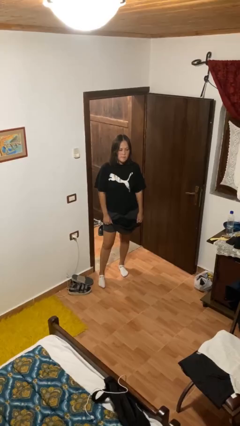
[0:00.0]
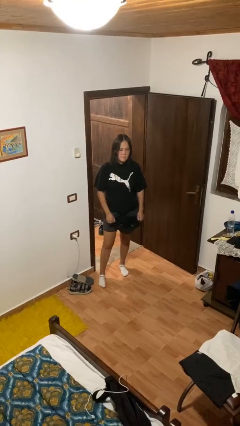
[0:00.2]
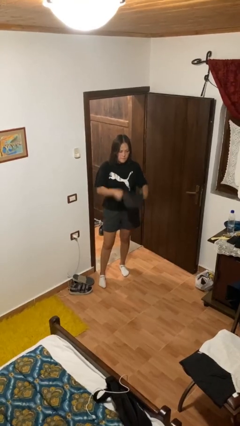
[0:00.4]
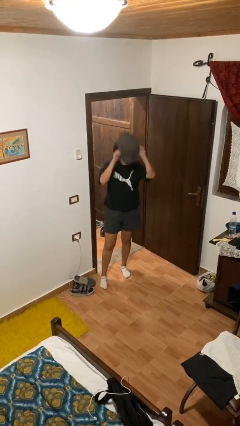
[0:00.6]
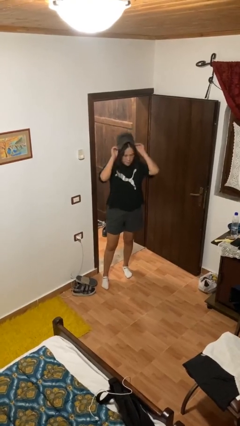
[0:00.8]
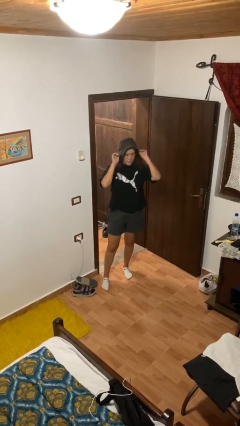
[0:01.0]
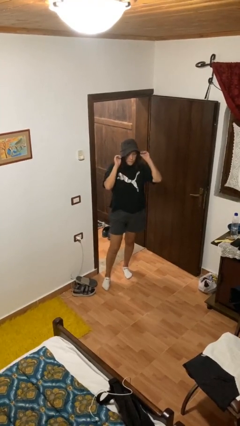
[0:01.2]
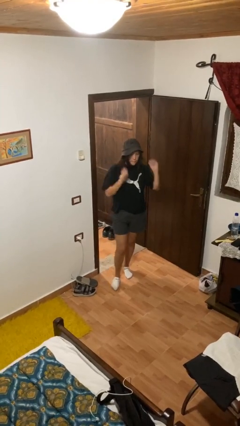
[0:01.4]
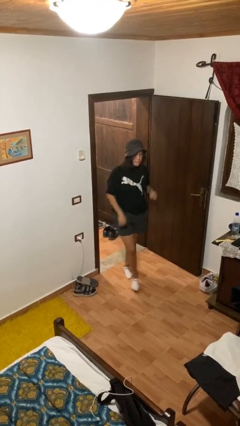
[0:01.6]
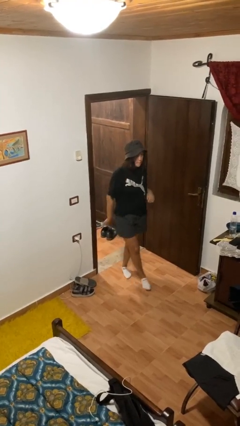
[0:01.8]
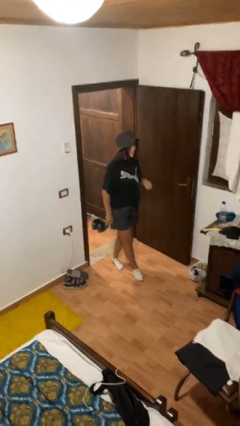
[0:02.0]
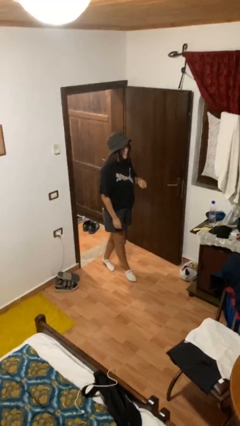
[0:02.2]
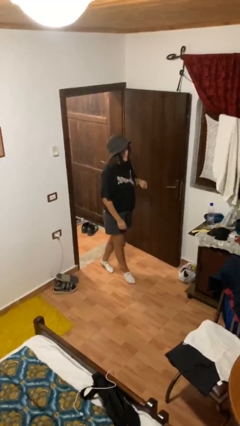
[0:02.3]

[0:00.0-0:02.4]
person puts on hat

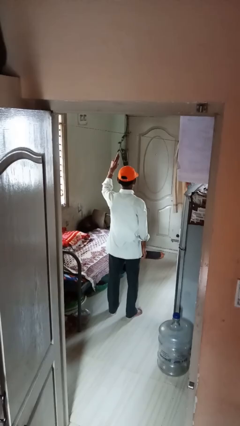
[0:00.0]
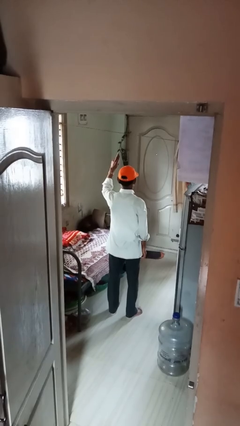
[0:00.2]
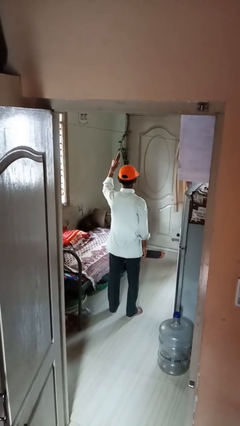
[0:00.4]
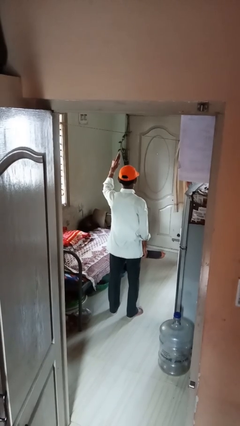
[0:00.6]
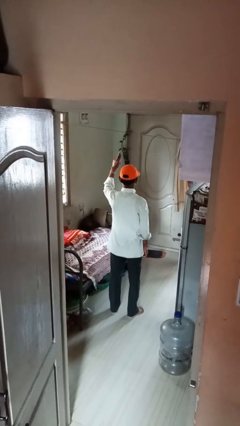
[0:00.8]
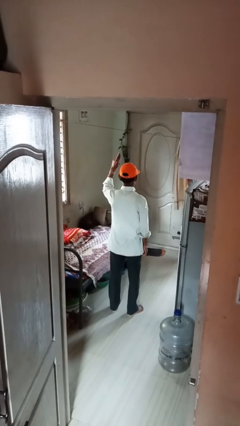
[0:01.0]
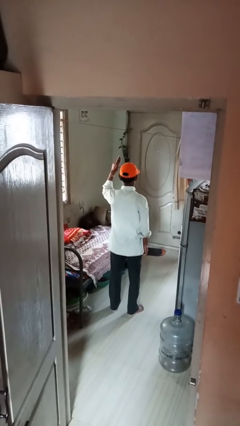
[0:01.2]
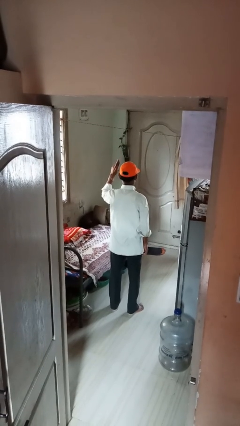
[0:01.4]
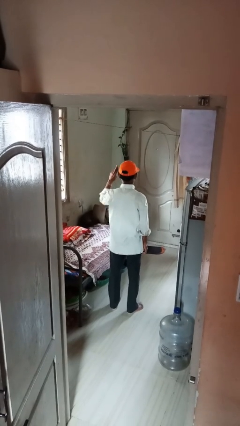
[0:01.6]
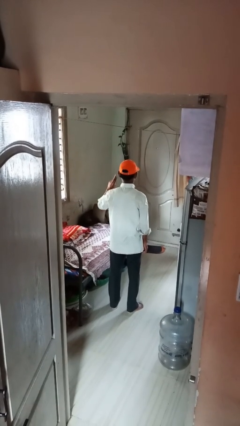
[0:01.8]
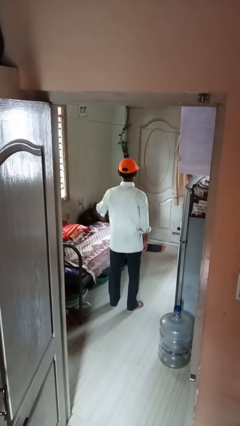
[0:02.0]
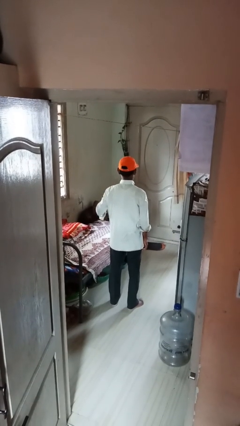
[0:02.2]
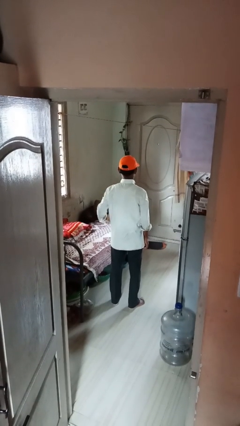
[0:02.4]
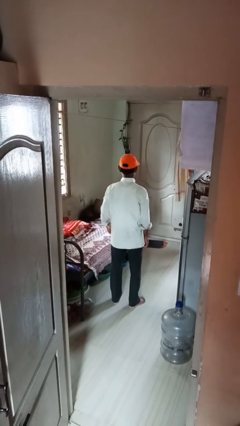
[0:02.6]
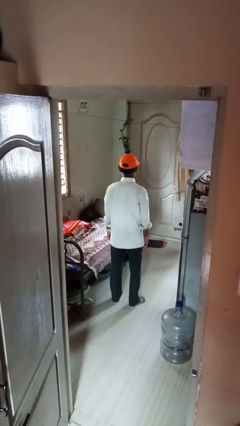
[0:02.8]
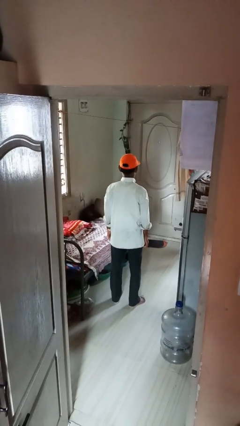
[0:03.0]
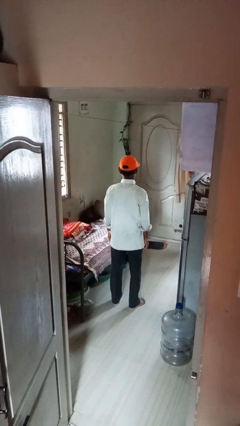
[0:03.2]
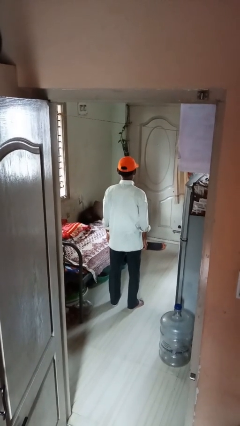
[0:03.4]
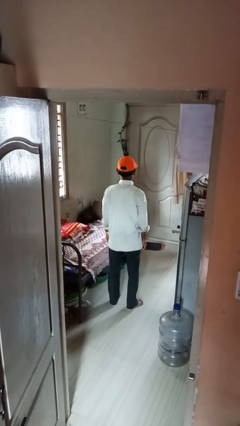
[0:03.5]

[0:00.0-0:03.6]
person gestures swipe down

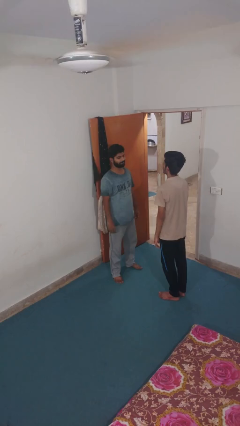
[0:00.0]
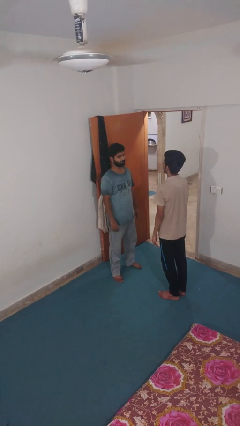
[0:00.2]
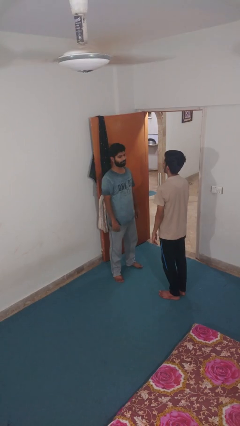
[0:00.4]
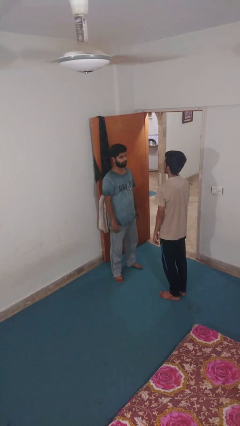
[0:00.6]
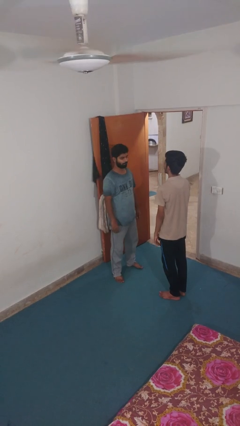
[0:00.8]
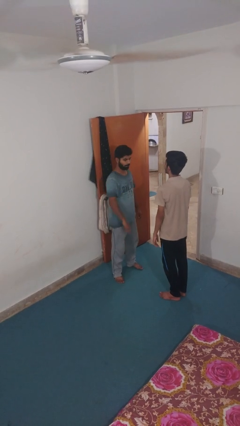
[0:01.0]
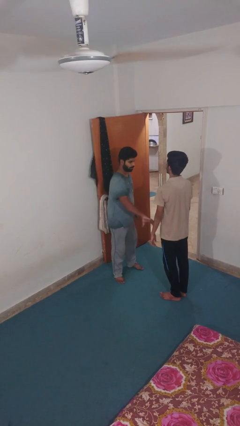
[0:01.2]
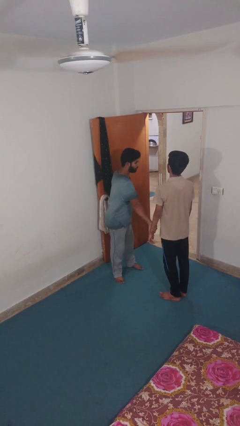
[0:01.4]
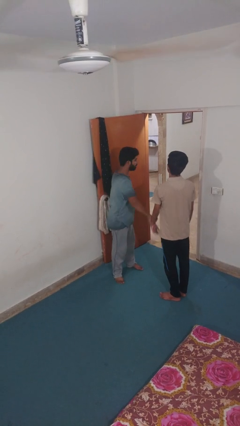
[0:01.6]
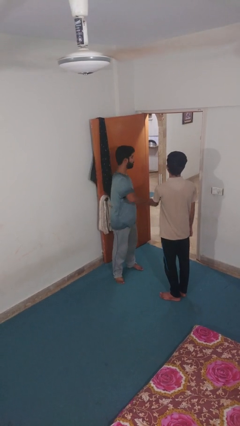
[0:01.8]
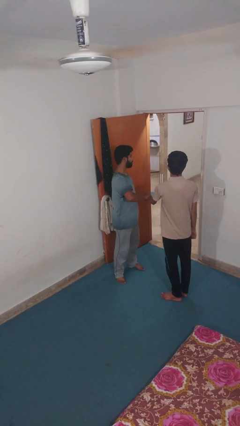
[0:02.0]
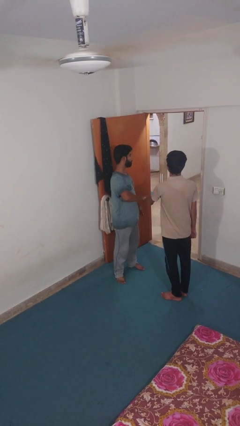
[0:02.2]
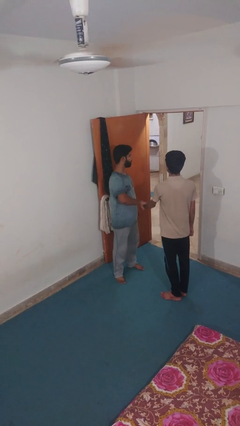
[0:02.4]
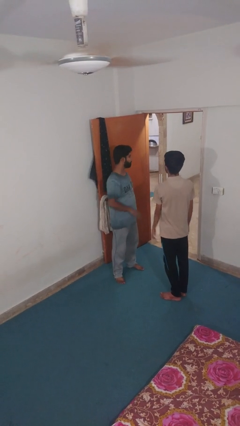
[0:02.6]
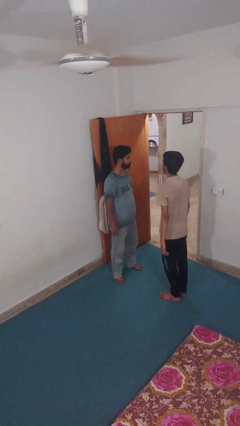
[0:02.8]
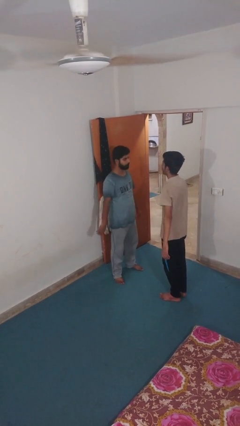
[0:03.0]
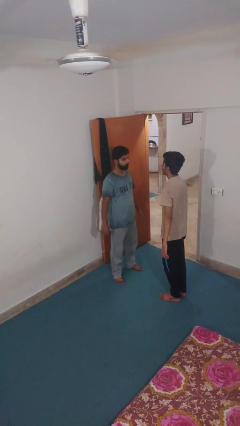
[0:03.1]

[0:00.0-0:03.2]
person grabs person by forearm

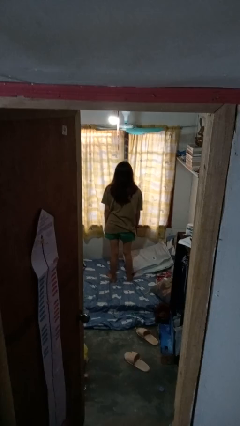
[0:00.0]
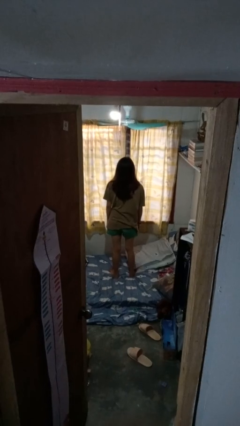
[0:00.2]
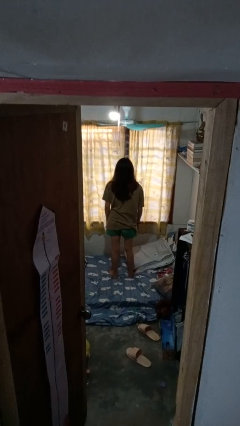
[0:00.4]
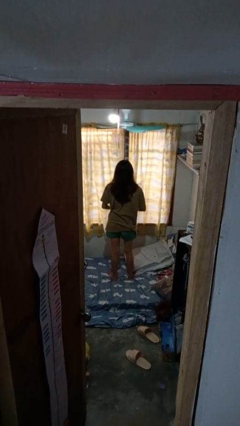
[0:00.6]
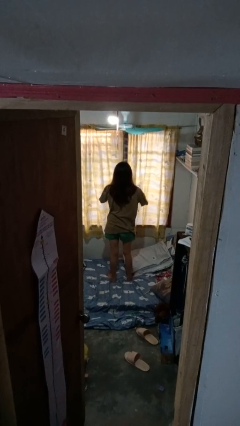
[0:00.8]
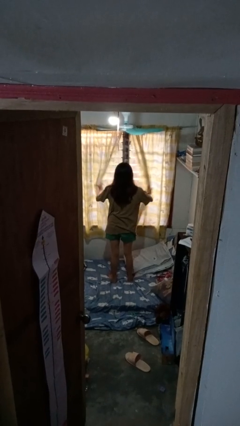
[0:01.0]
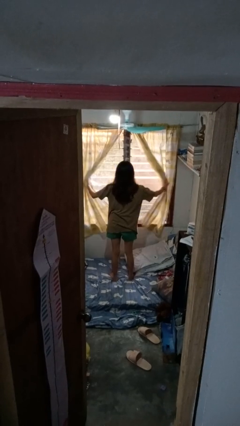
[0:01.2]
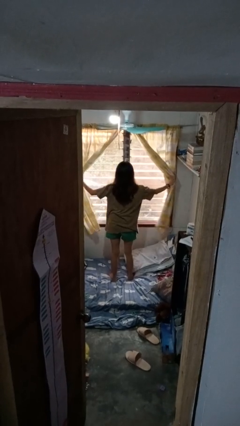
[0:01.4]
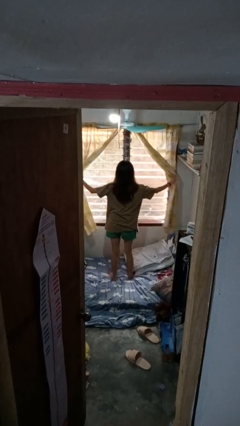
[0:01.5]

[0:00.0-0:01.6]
person opens curtains

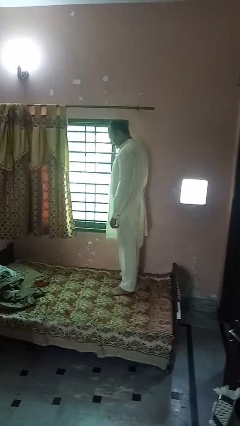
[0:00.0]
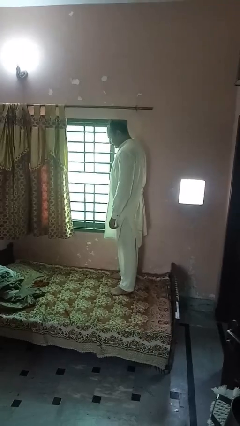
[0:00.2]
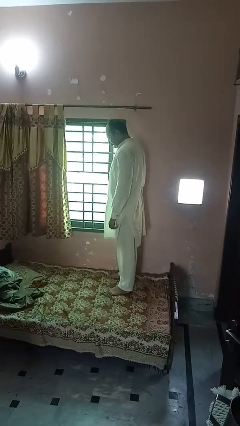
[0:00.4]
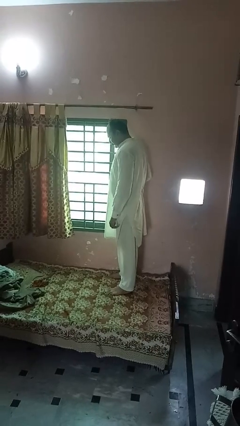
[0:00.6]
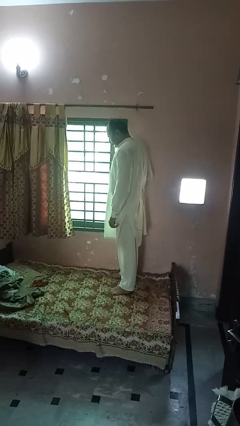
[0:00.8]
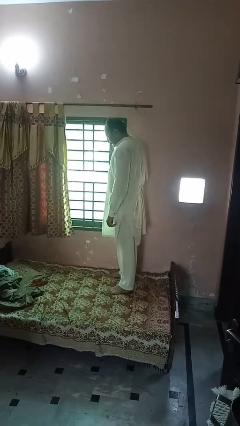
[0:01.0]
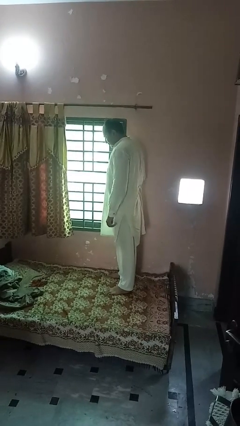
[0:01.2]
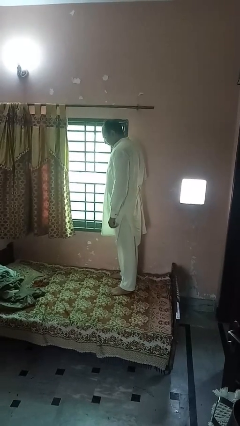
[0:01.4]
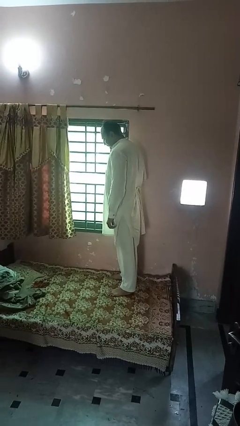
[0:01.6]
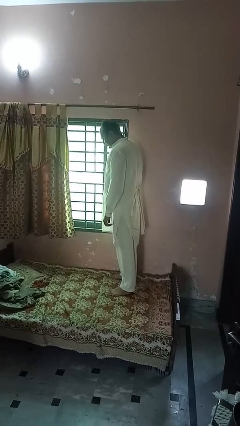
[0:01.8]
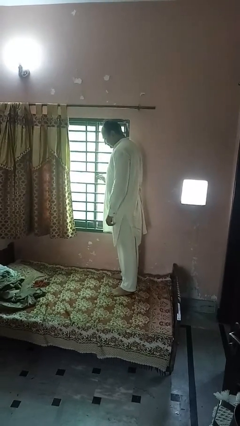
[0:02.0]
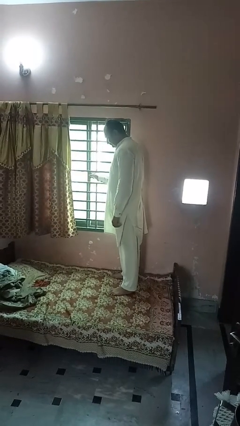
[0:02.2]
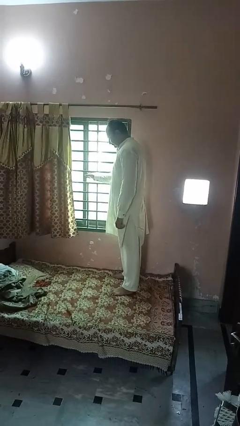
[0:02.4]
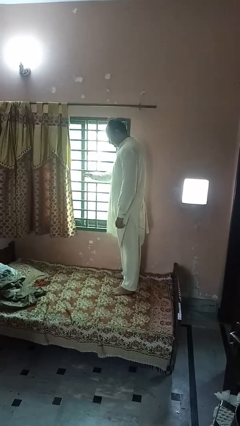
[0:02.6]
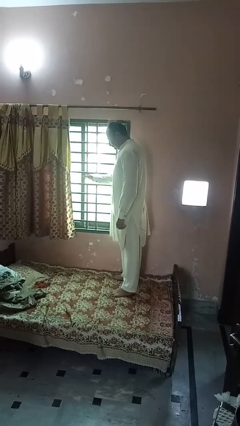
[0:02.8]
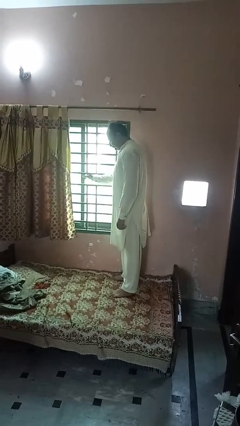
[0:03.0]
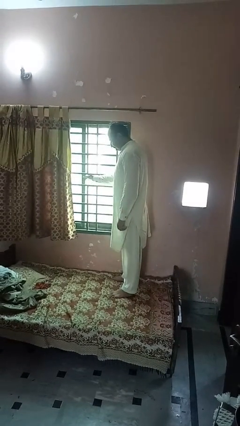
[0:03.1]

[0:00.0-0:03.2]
person opens home window

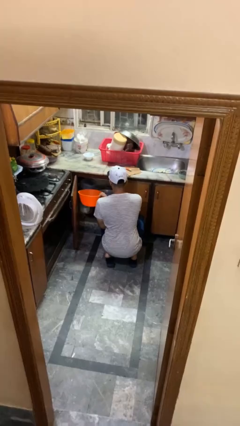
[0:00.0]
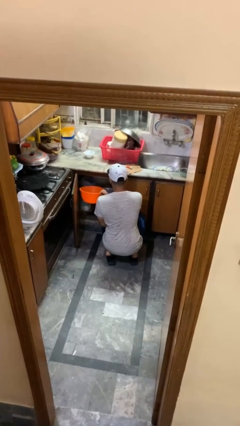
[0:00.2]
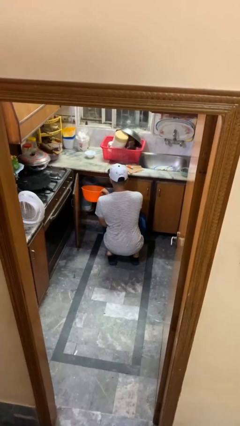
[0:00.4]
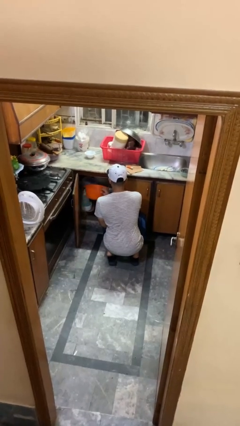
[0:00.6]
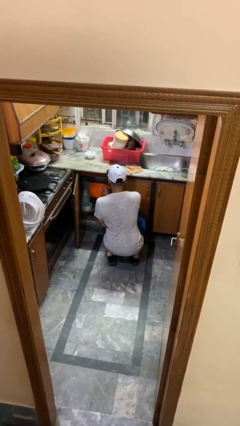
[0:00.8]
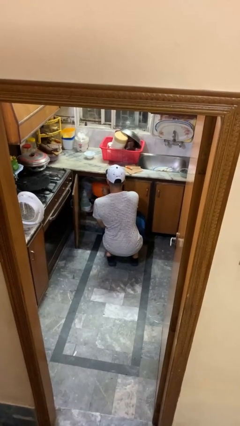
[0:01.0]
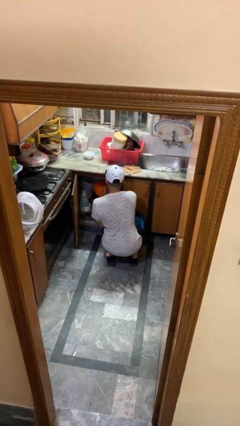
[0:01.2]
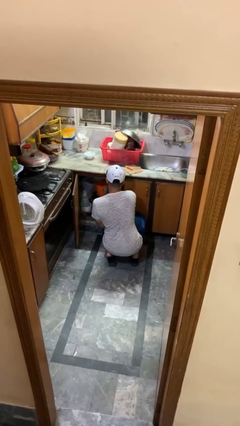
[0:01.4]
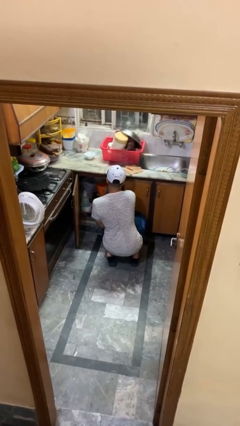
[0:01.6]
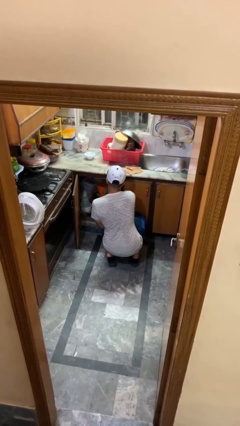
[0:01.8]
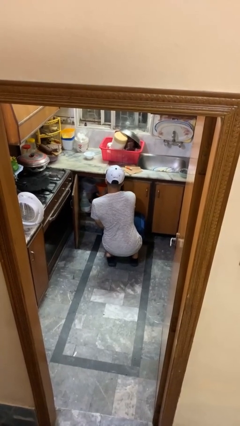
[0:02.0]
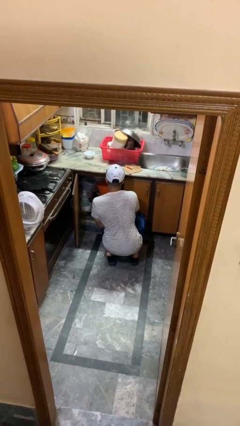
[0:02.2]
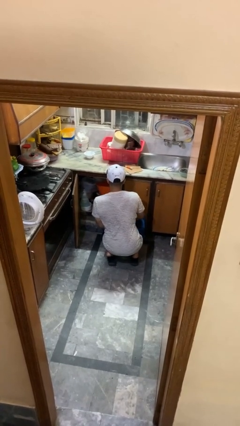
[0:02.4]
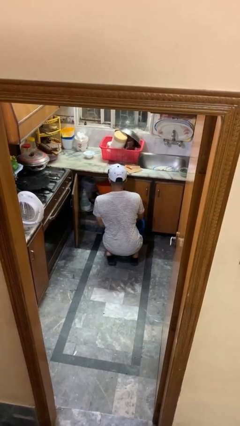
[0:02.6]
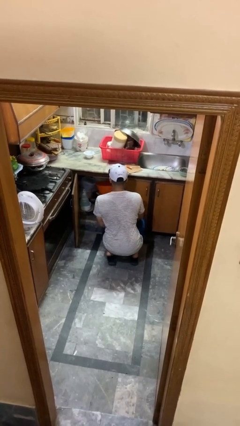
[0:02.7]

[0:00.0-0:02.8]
person puts object into kitchen drawer

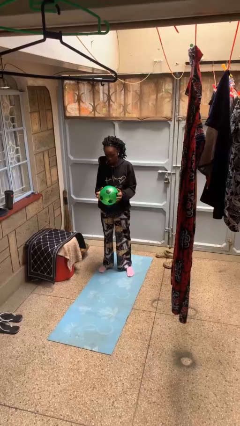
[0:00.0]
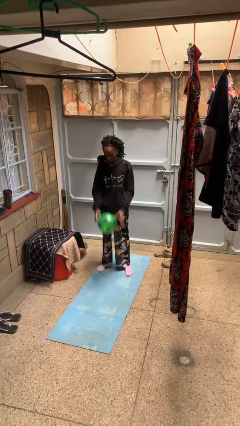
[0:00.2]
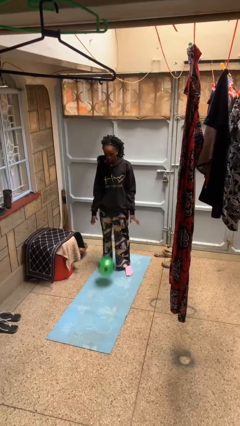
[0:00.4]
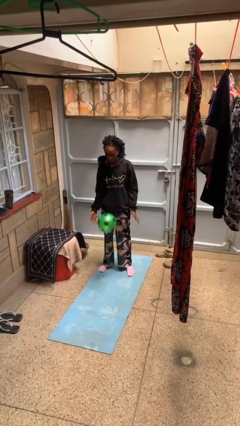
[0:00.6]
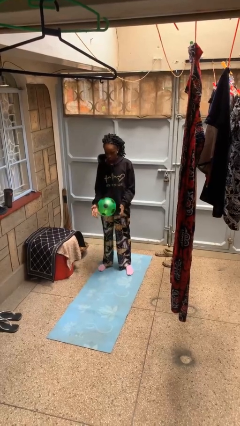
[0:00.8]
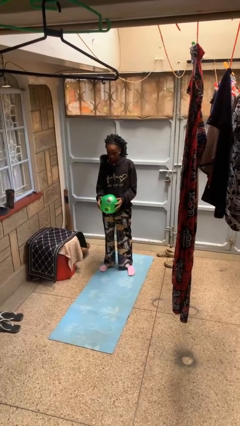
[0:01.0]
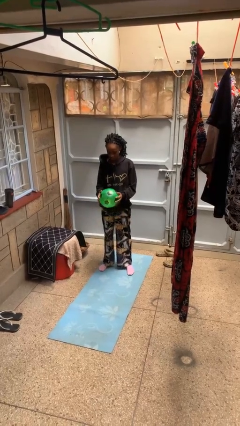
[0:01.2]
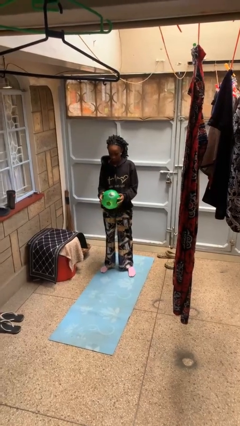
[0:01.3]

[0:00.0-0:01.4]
person bounces ball on floor
